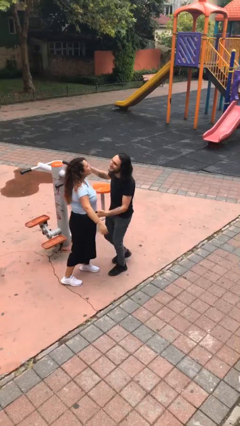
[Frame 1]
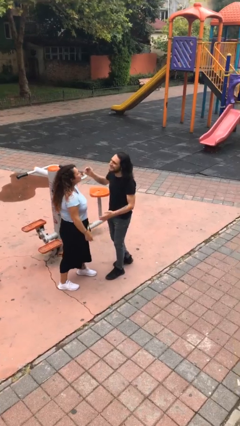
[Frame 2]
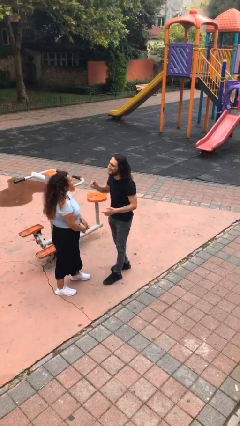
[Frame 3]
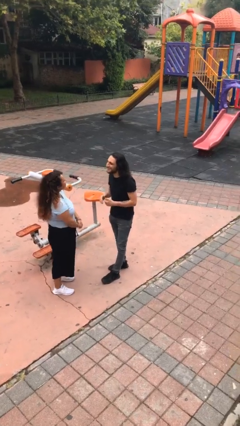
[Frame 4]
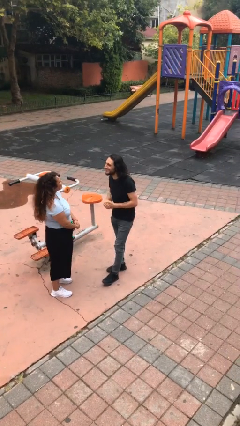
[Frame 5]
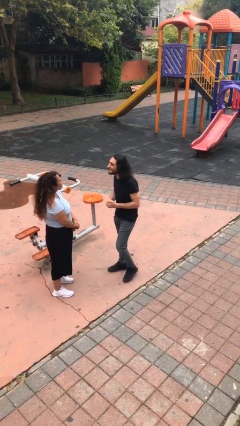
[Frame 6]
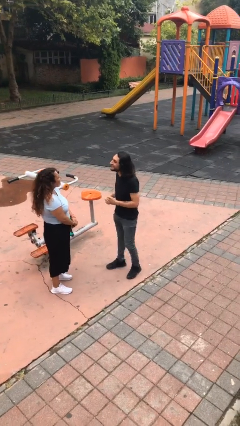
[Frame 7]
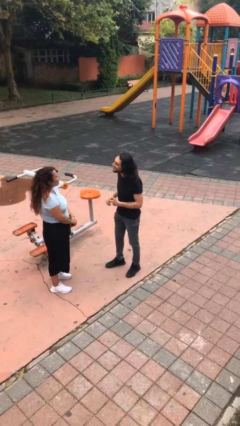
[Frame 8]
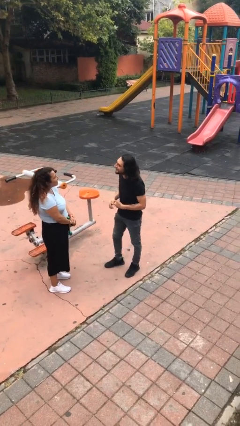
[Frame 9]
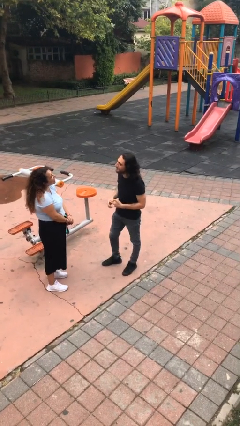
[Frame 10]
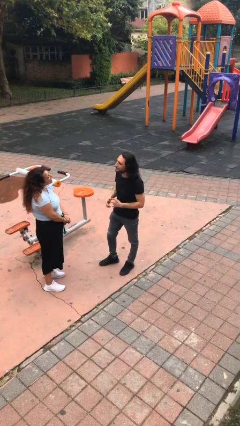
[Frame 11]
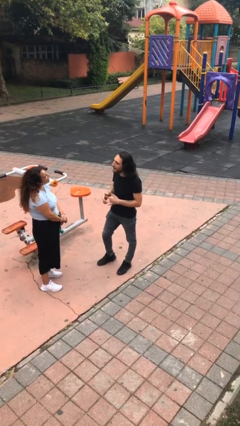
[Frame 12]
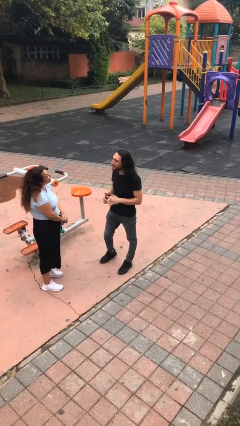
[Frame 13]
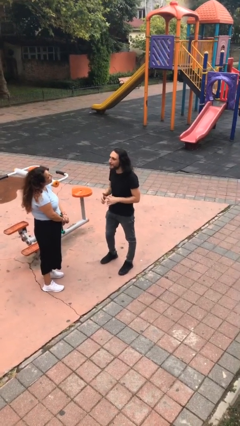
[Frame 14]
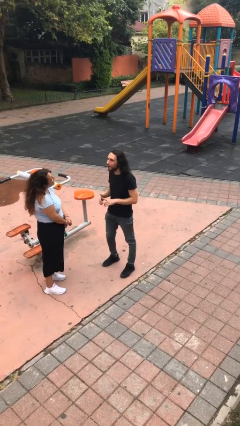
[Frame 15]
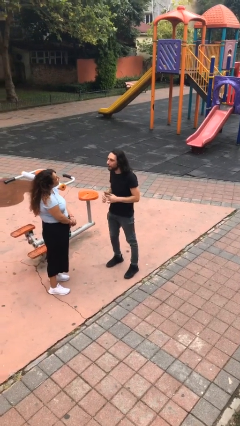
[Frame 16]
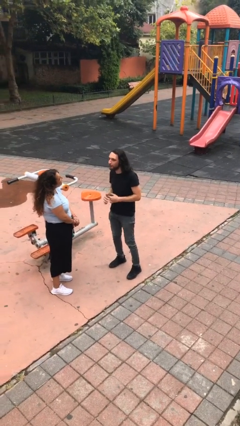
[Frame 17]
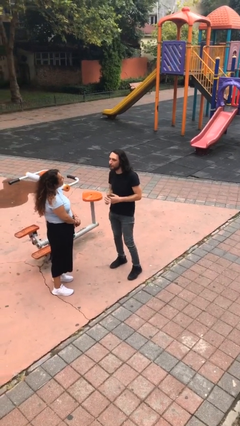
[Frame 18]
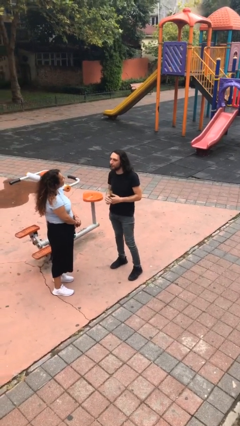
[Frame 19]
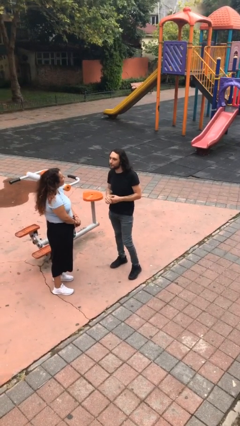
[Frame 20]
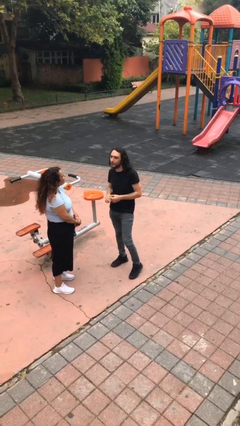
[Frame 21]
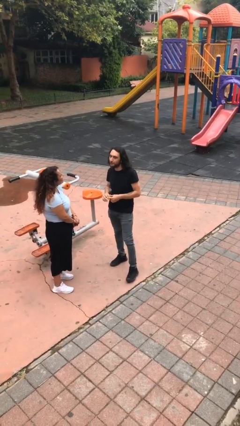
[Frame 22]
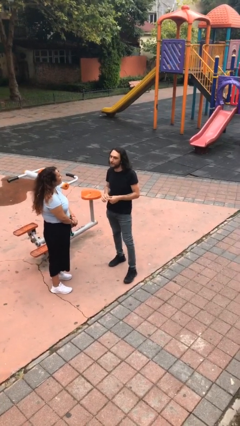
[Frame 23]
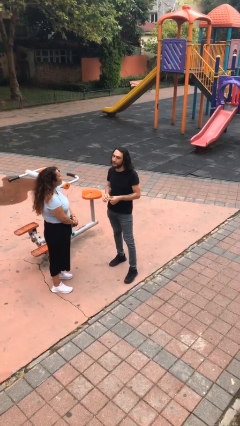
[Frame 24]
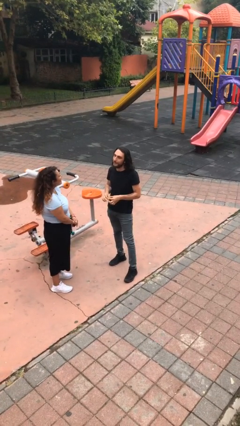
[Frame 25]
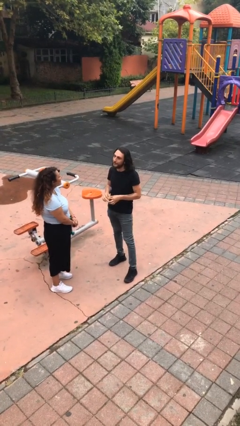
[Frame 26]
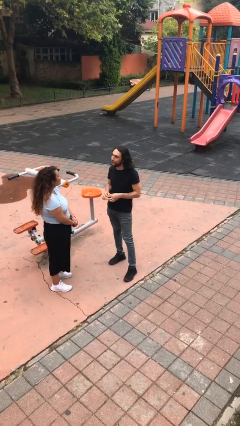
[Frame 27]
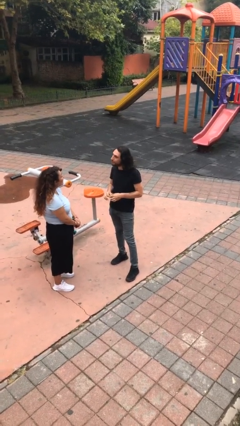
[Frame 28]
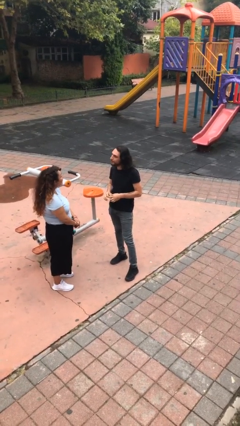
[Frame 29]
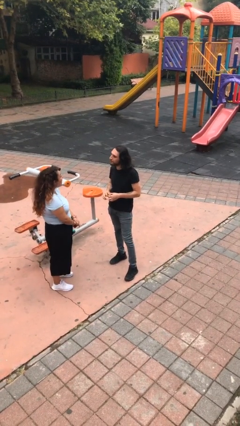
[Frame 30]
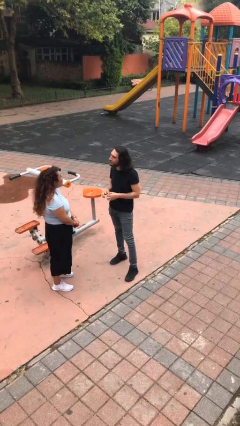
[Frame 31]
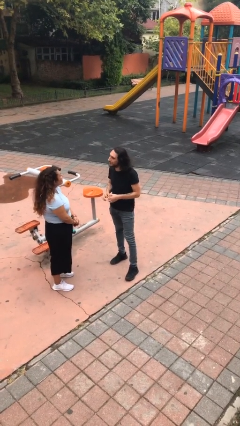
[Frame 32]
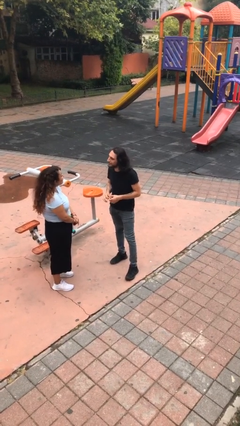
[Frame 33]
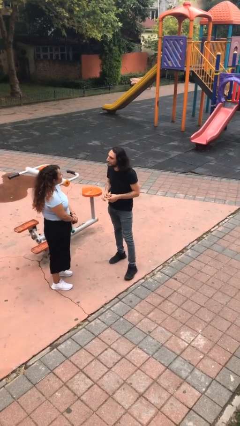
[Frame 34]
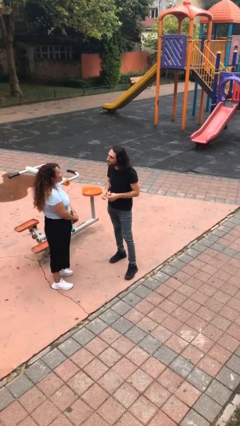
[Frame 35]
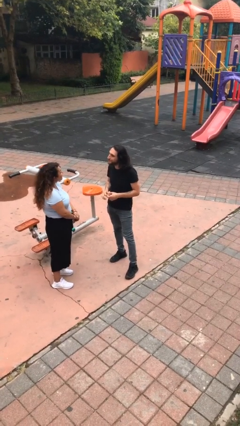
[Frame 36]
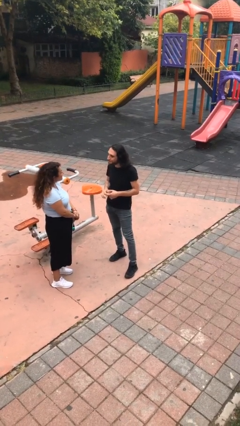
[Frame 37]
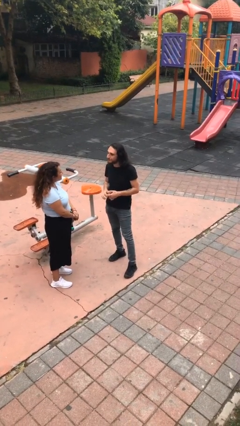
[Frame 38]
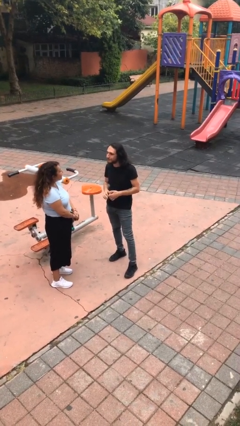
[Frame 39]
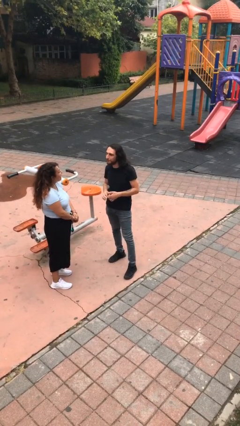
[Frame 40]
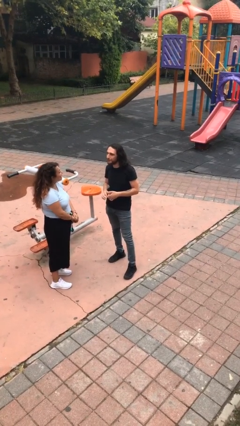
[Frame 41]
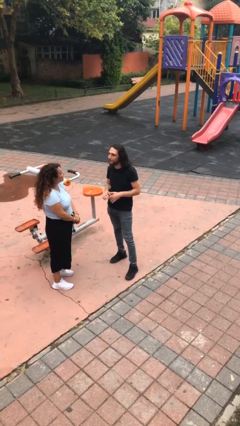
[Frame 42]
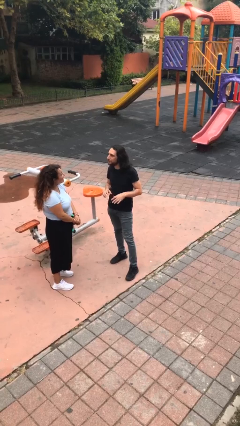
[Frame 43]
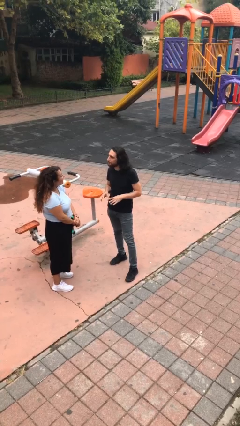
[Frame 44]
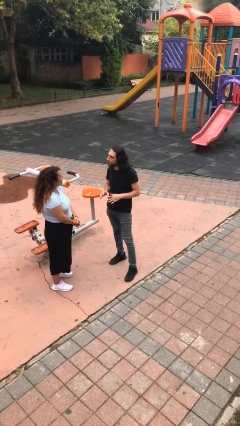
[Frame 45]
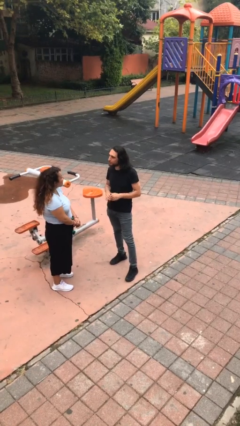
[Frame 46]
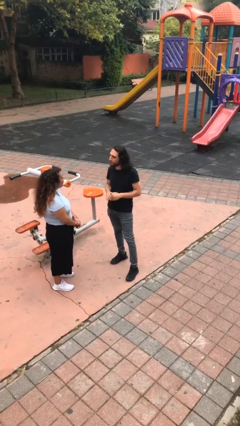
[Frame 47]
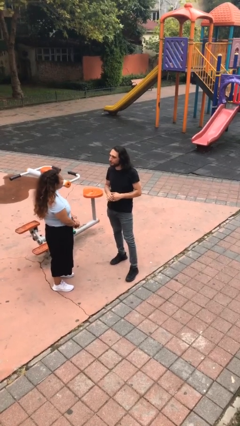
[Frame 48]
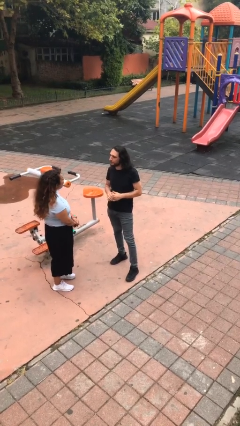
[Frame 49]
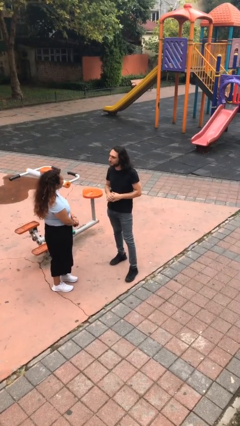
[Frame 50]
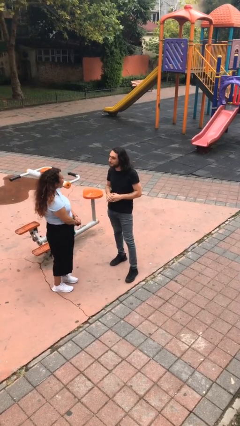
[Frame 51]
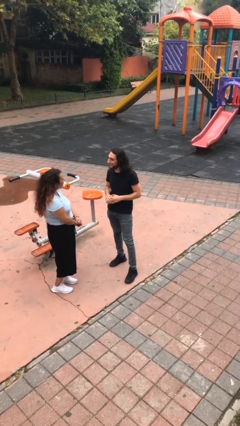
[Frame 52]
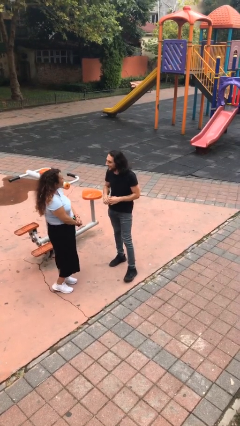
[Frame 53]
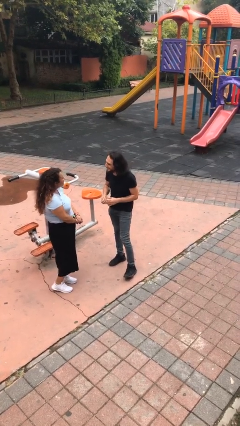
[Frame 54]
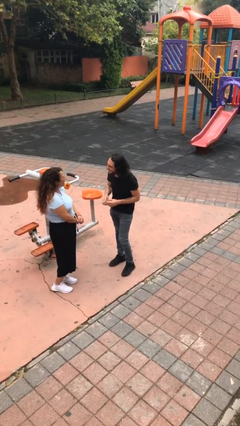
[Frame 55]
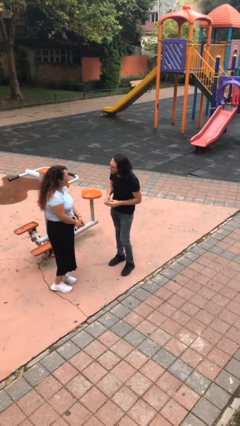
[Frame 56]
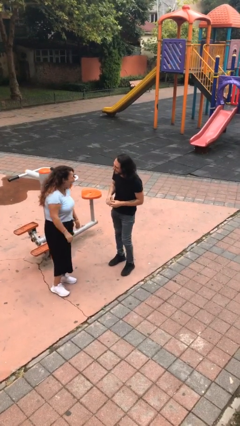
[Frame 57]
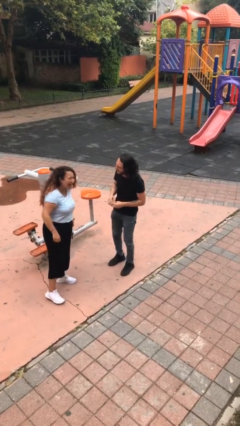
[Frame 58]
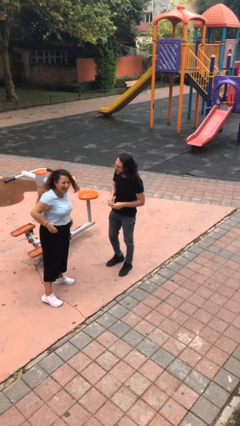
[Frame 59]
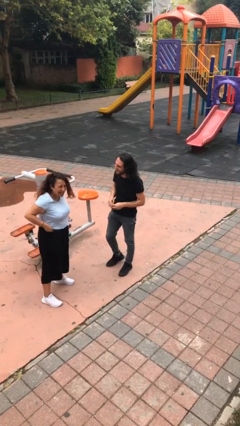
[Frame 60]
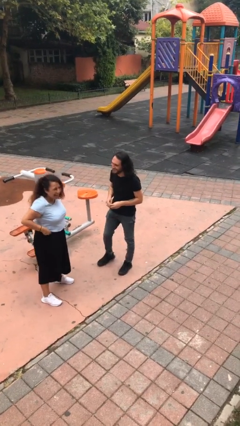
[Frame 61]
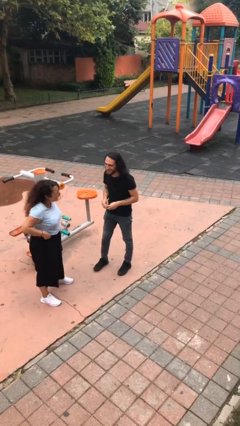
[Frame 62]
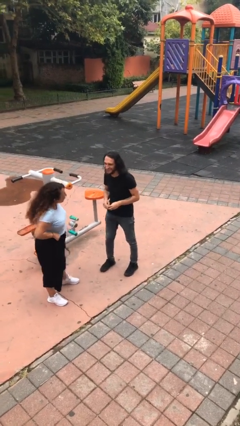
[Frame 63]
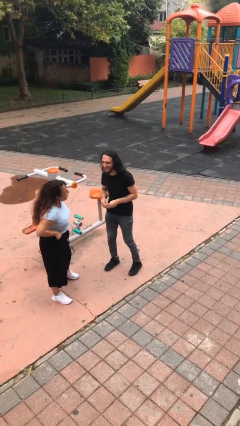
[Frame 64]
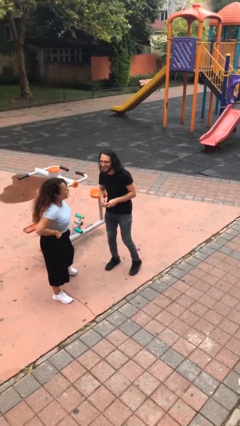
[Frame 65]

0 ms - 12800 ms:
person talks to person

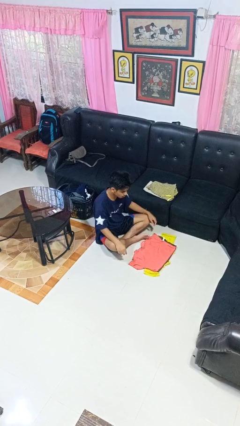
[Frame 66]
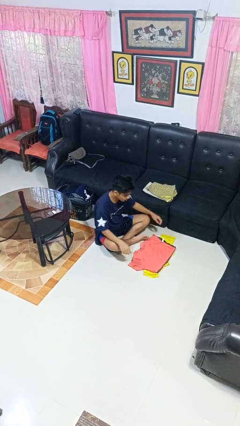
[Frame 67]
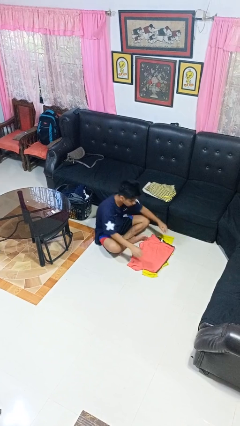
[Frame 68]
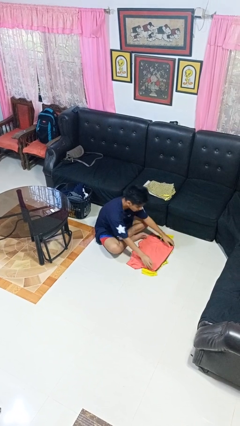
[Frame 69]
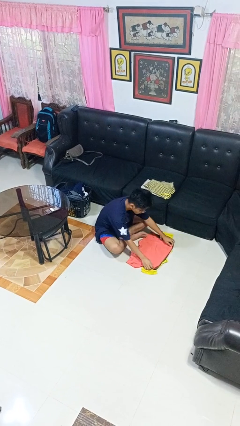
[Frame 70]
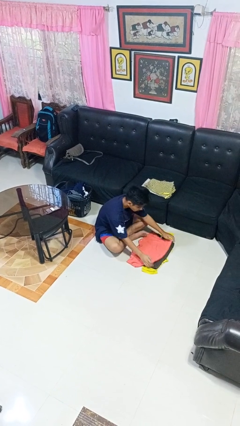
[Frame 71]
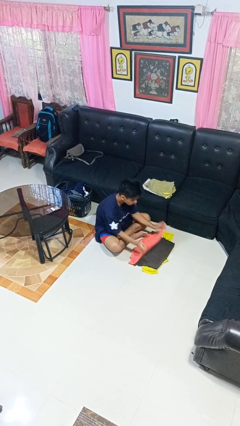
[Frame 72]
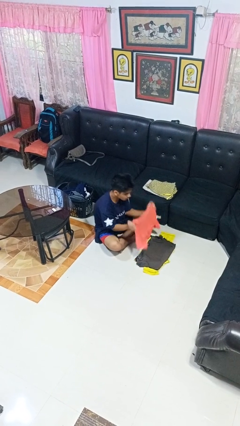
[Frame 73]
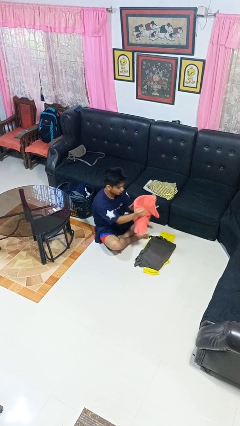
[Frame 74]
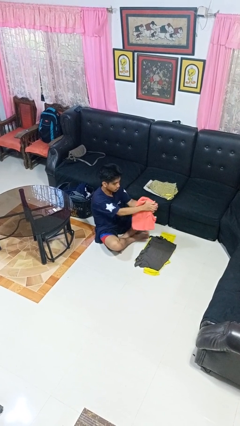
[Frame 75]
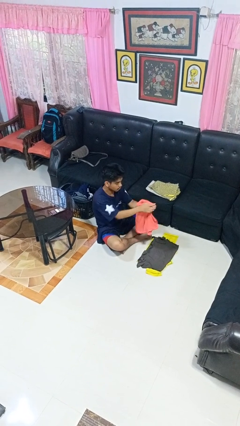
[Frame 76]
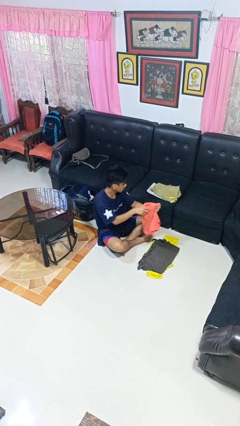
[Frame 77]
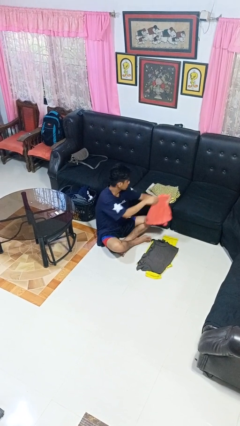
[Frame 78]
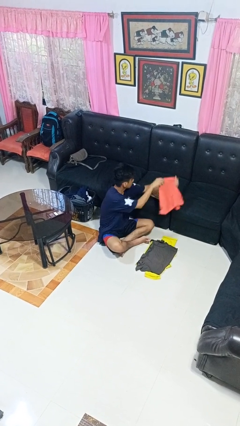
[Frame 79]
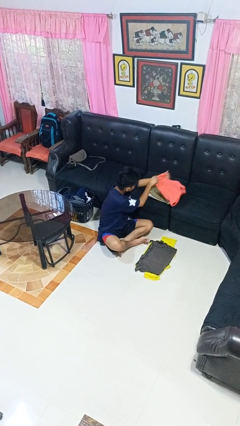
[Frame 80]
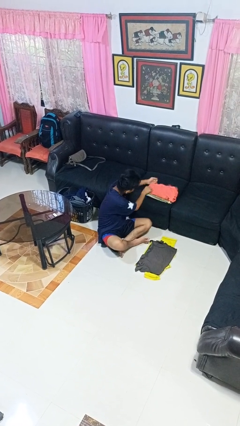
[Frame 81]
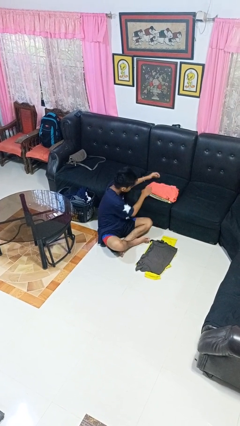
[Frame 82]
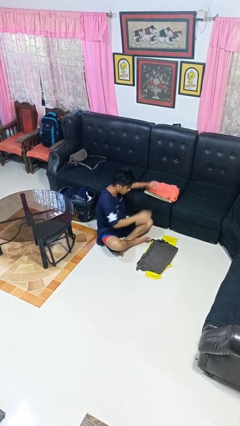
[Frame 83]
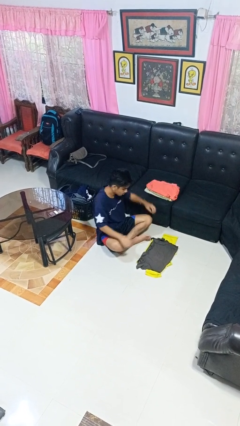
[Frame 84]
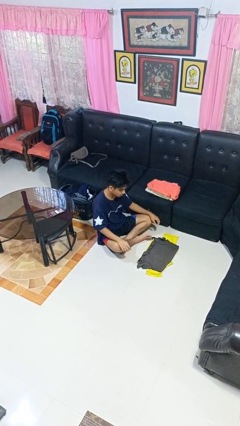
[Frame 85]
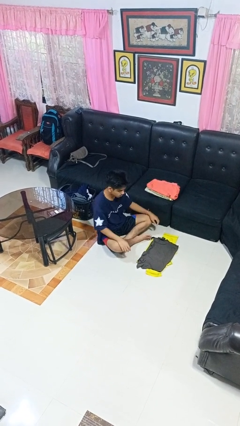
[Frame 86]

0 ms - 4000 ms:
person folds shirt

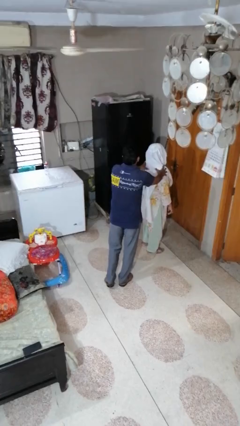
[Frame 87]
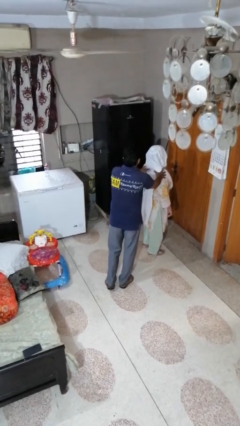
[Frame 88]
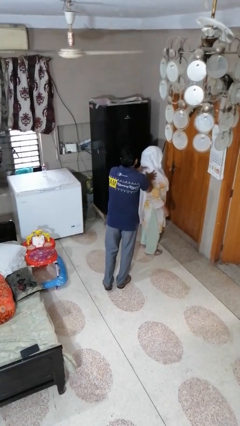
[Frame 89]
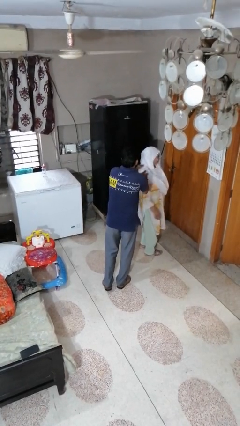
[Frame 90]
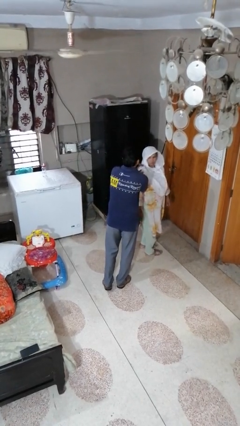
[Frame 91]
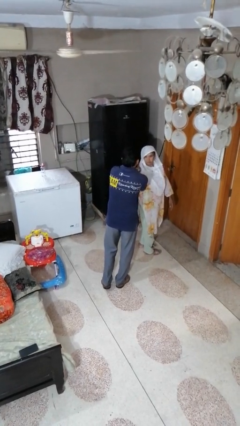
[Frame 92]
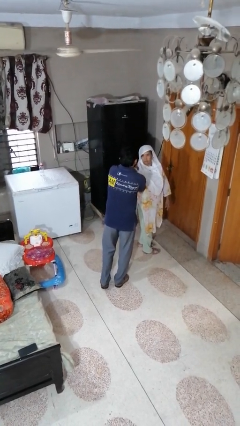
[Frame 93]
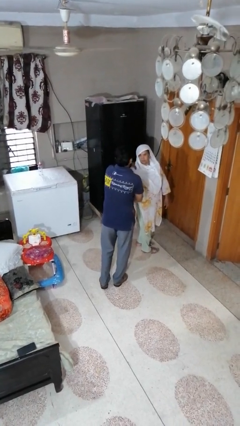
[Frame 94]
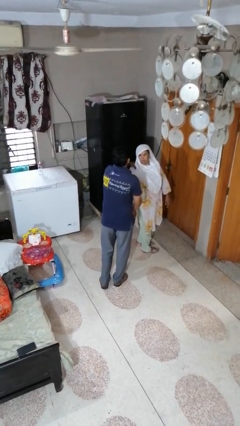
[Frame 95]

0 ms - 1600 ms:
person spins person around
